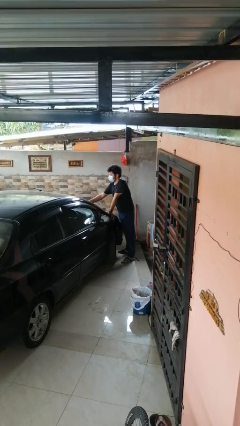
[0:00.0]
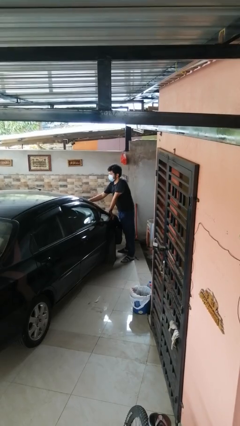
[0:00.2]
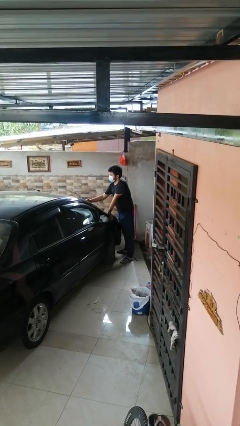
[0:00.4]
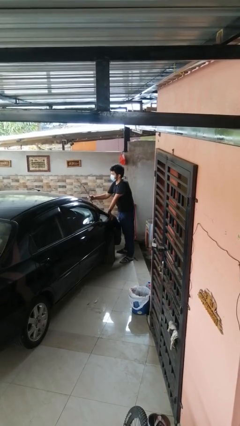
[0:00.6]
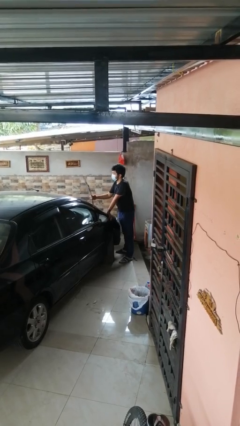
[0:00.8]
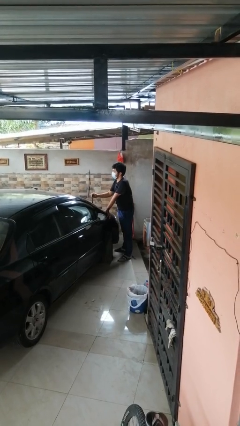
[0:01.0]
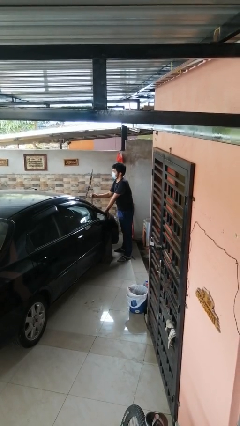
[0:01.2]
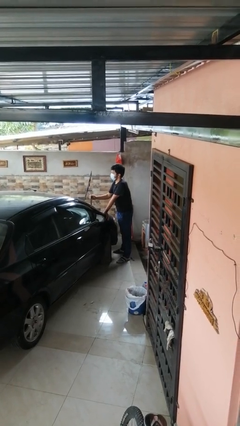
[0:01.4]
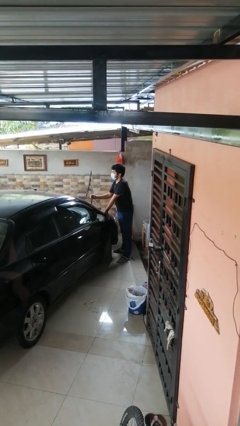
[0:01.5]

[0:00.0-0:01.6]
person flips up car wipers

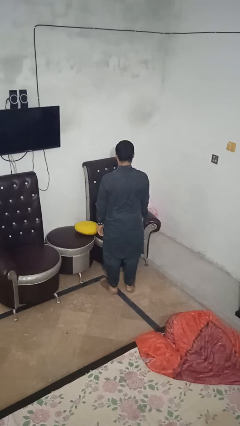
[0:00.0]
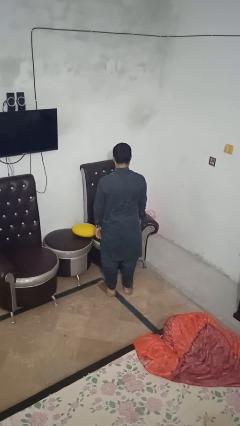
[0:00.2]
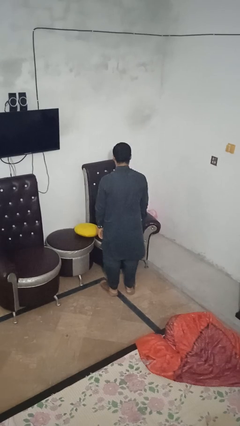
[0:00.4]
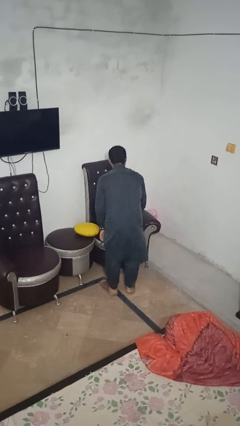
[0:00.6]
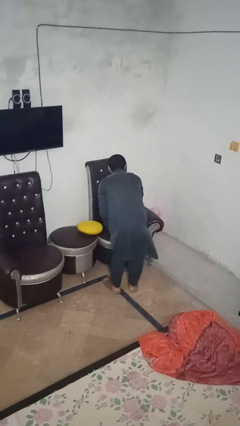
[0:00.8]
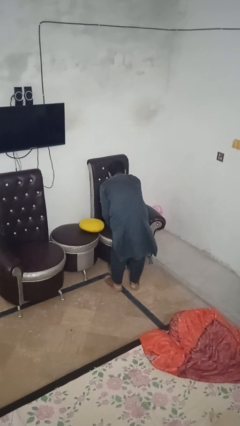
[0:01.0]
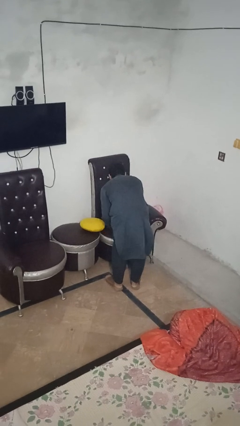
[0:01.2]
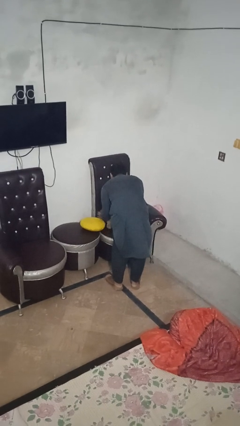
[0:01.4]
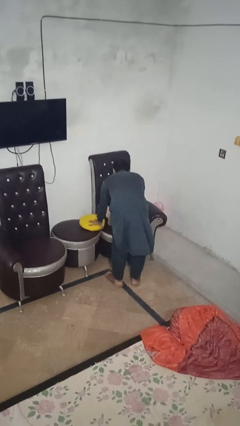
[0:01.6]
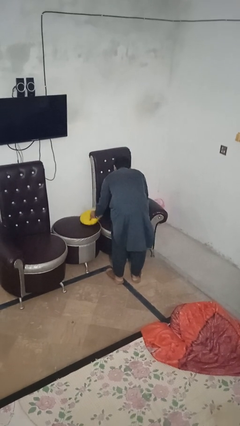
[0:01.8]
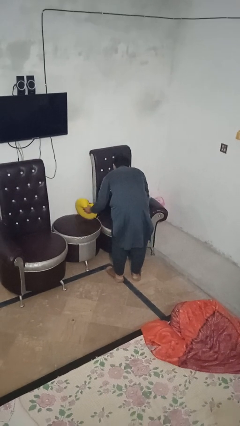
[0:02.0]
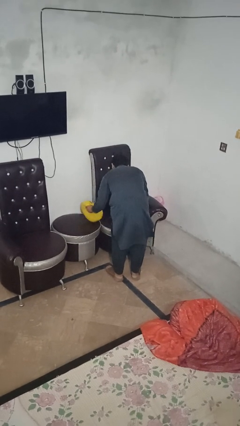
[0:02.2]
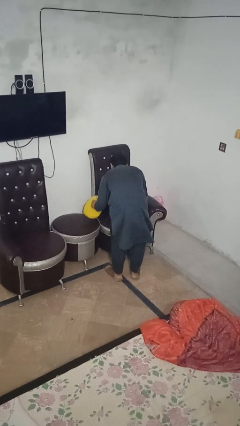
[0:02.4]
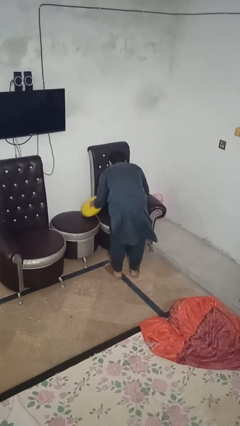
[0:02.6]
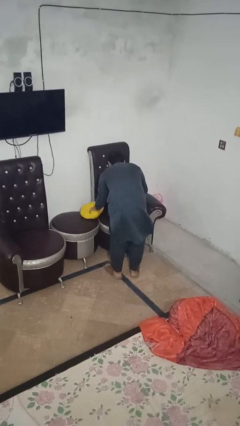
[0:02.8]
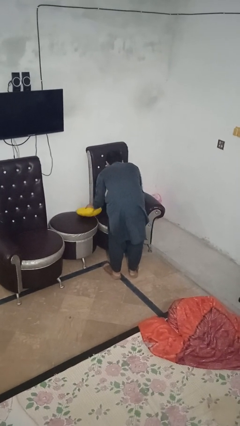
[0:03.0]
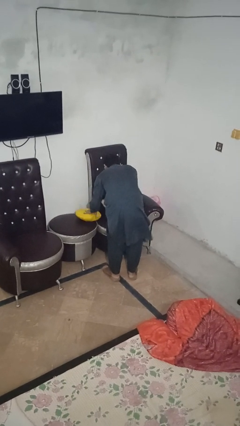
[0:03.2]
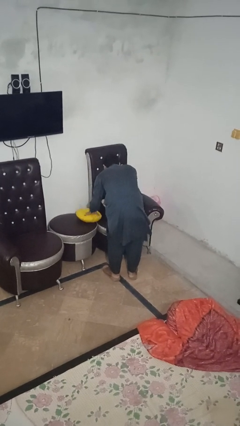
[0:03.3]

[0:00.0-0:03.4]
person searches in couch

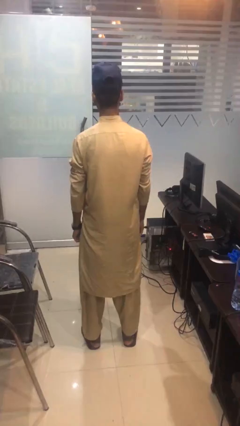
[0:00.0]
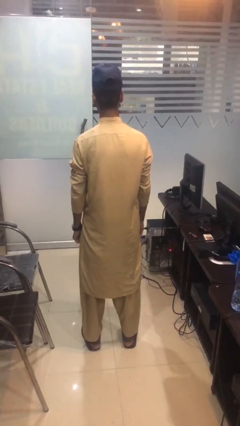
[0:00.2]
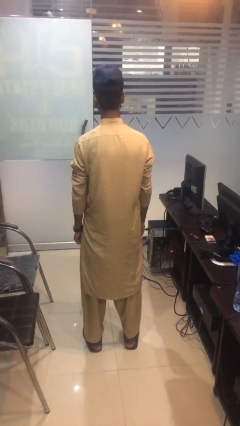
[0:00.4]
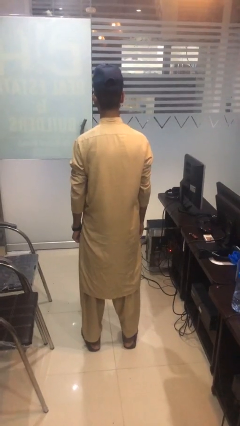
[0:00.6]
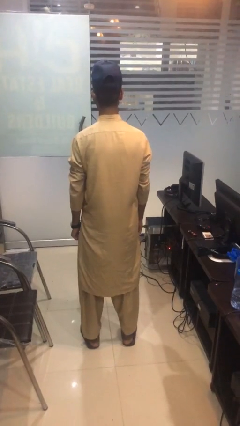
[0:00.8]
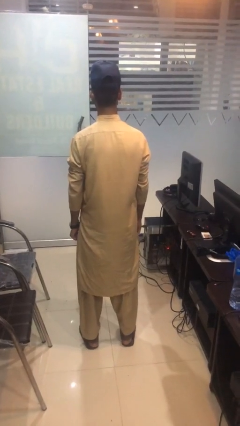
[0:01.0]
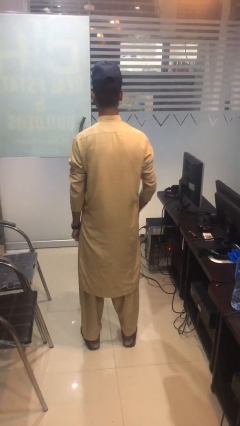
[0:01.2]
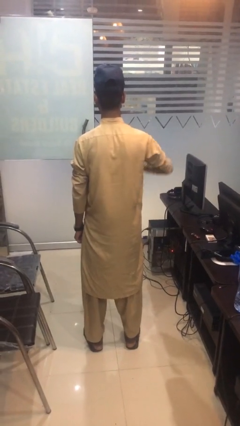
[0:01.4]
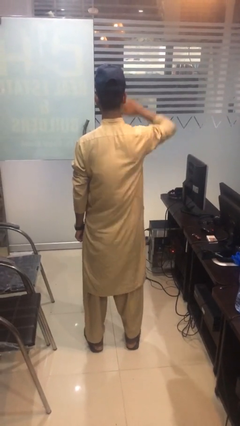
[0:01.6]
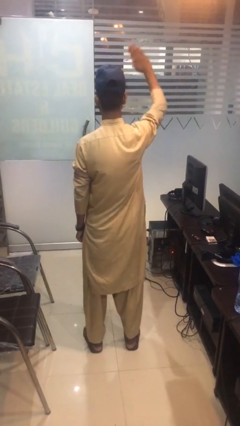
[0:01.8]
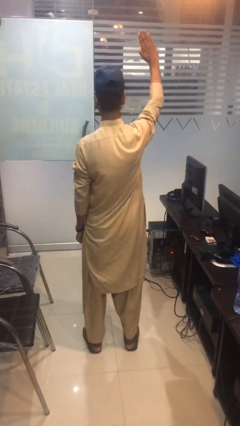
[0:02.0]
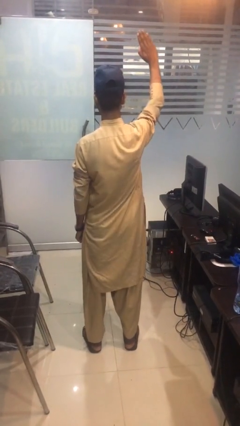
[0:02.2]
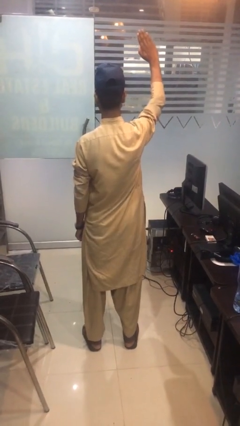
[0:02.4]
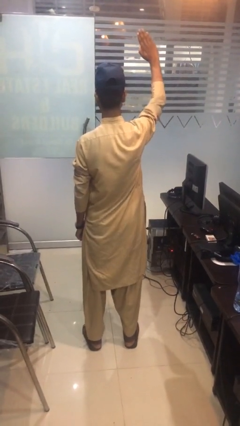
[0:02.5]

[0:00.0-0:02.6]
person gestures swipe up

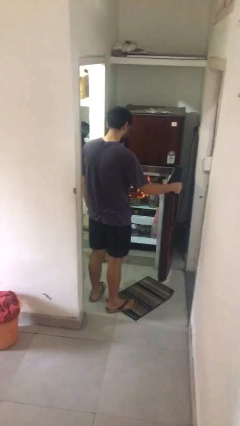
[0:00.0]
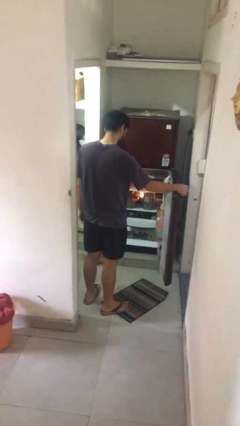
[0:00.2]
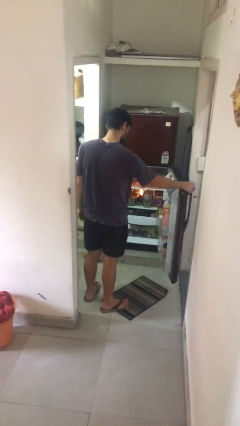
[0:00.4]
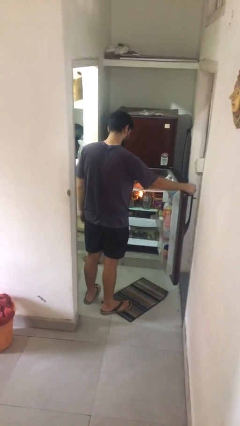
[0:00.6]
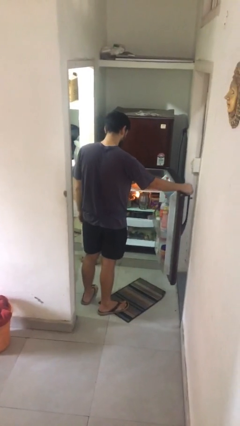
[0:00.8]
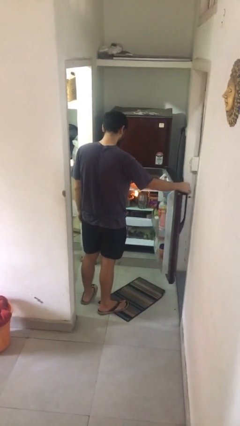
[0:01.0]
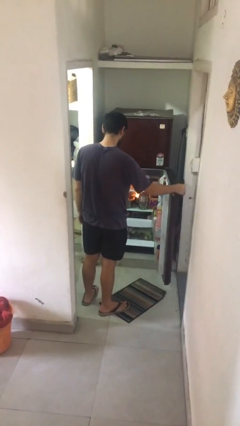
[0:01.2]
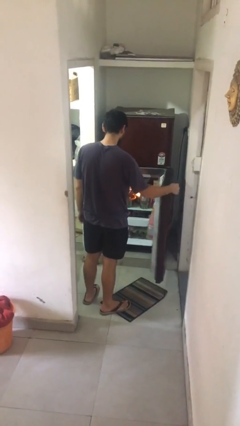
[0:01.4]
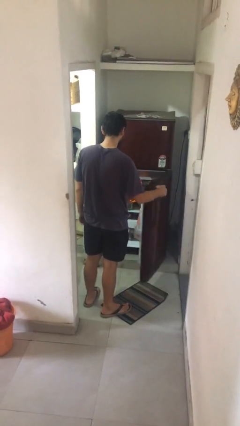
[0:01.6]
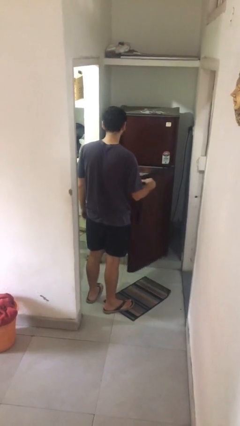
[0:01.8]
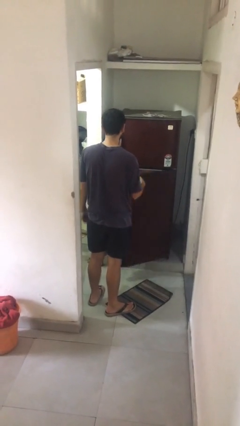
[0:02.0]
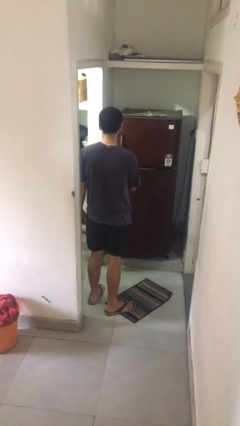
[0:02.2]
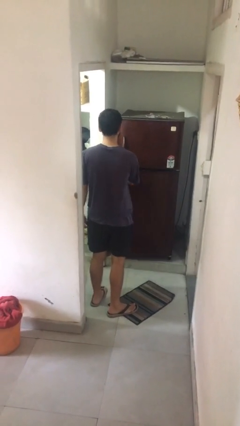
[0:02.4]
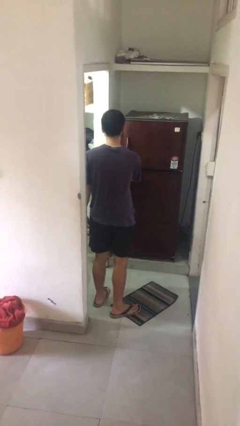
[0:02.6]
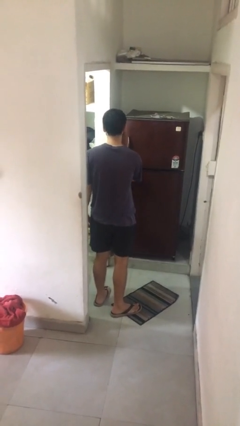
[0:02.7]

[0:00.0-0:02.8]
person closes refrigerator

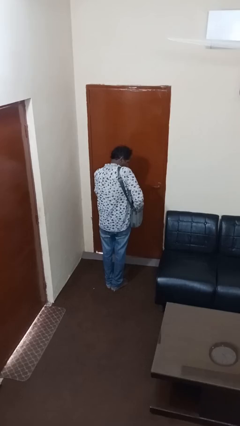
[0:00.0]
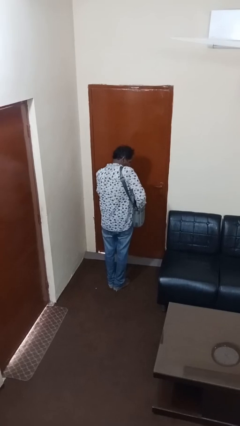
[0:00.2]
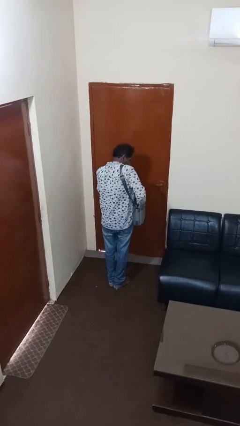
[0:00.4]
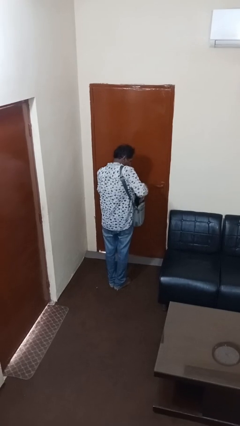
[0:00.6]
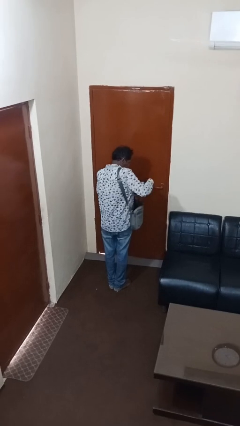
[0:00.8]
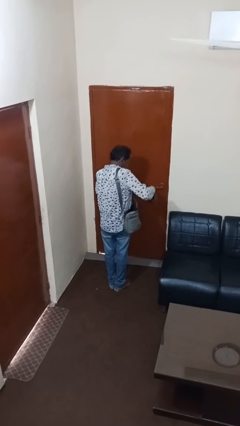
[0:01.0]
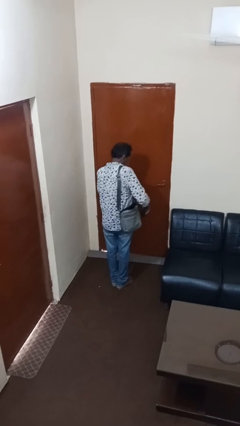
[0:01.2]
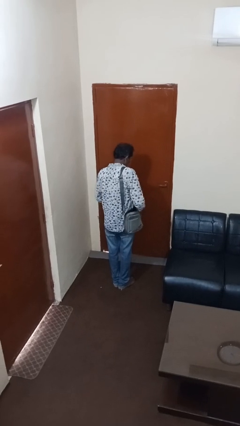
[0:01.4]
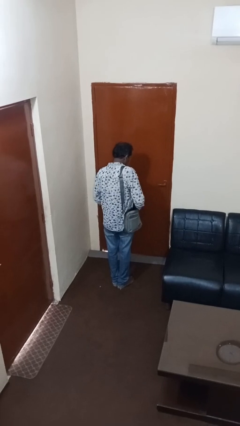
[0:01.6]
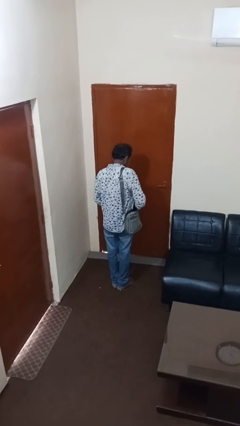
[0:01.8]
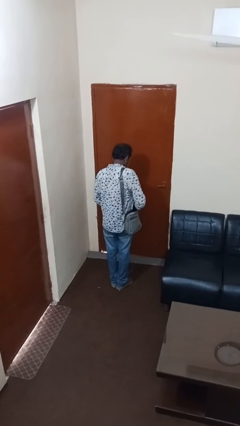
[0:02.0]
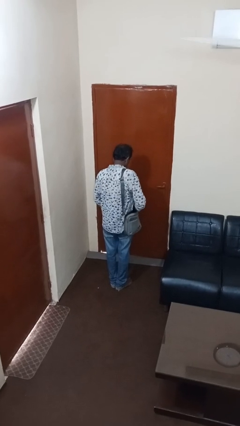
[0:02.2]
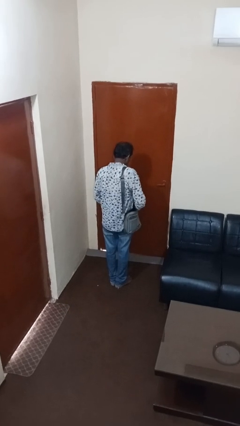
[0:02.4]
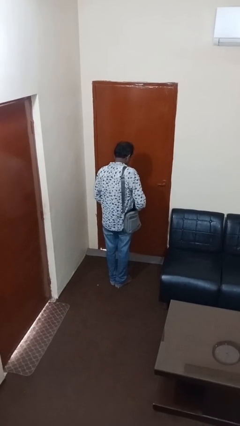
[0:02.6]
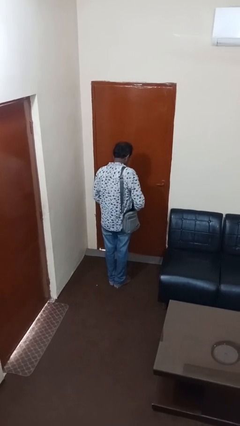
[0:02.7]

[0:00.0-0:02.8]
person takes object from purse

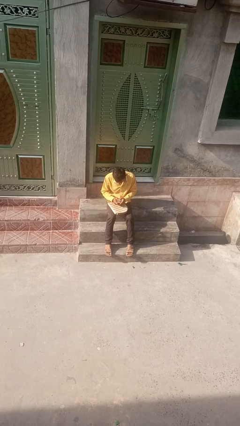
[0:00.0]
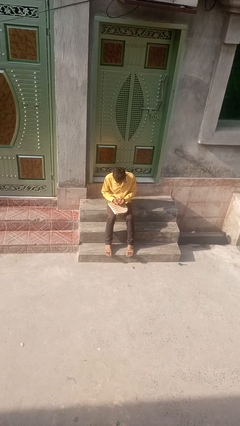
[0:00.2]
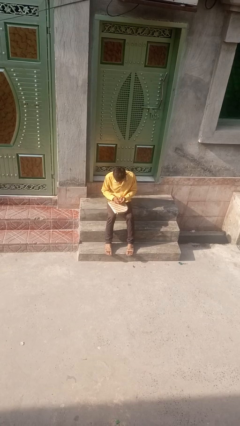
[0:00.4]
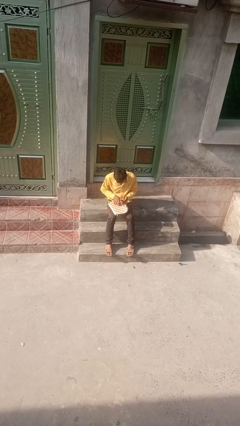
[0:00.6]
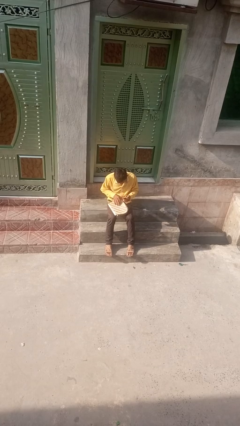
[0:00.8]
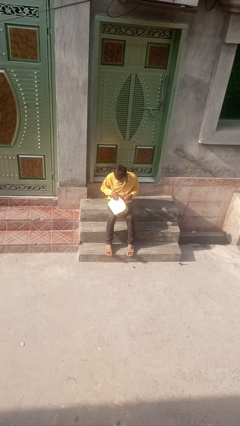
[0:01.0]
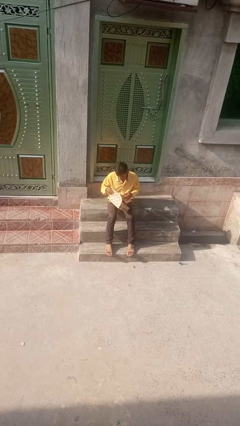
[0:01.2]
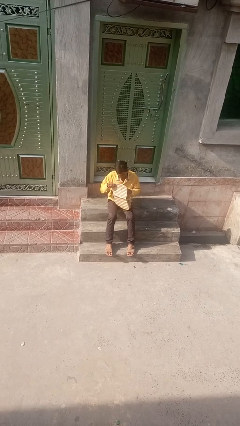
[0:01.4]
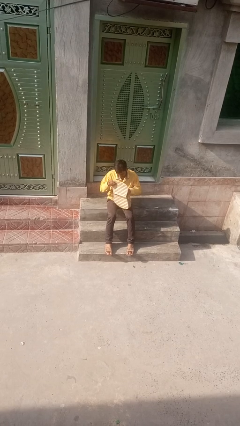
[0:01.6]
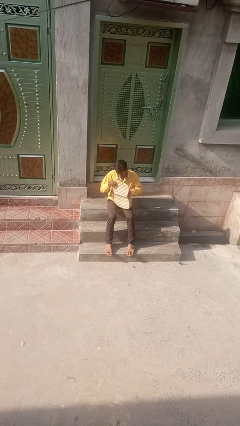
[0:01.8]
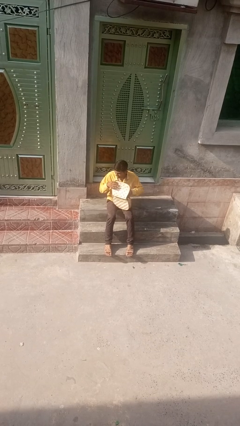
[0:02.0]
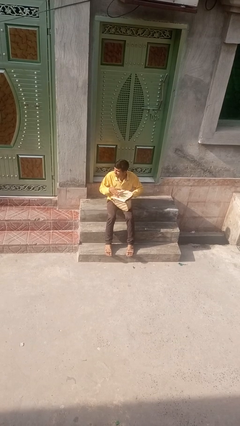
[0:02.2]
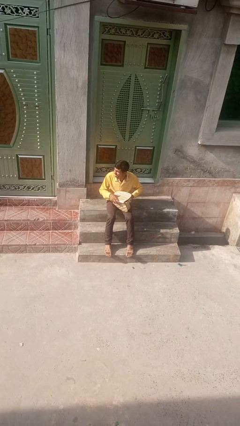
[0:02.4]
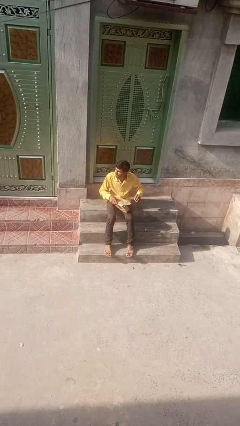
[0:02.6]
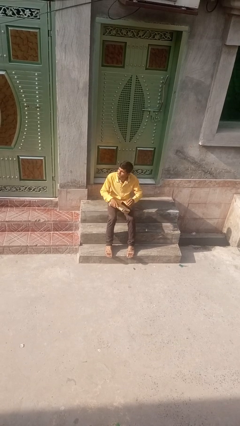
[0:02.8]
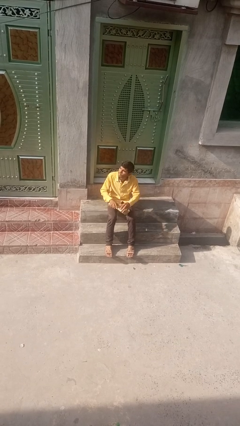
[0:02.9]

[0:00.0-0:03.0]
person puts object into backpack

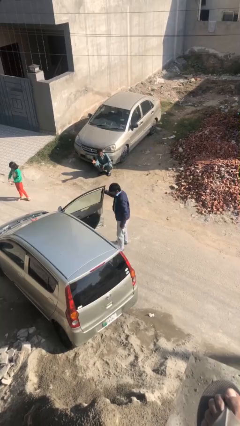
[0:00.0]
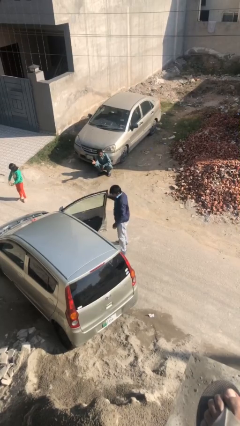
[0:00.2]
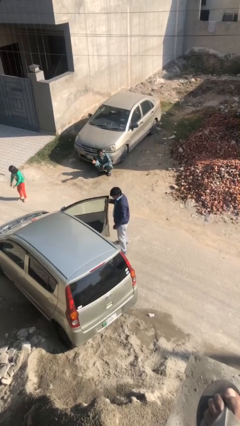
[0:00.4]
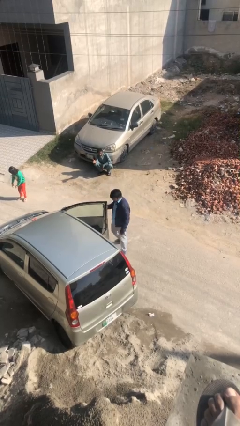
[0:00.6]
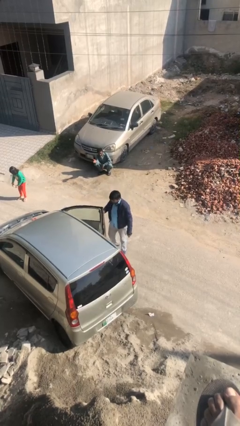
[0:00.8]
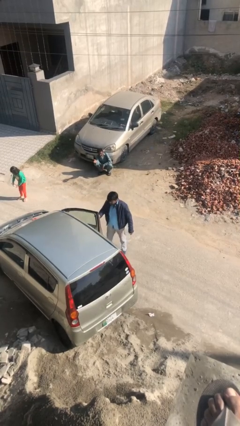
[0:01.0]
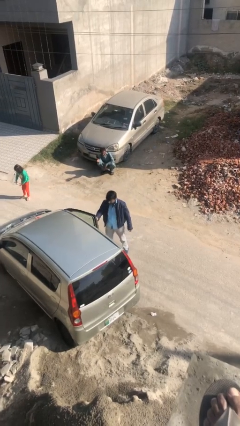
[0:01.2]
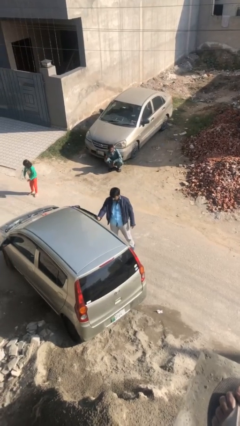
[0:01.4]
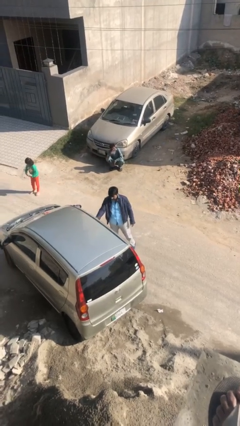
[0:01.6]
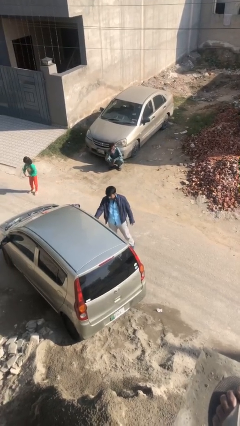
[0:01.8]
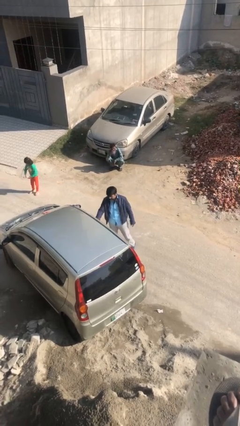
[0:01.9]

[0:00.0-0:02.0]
person closes car door
